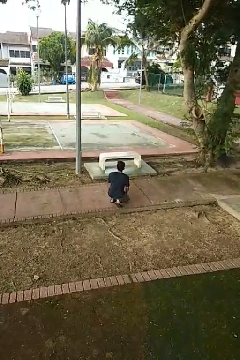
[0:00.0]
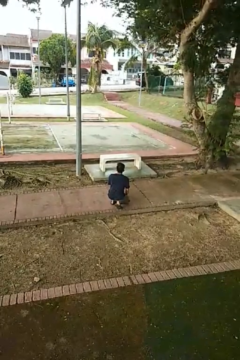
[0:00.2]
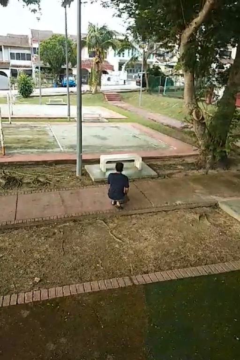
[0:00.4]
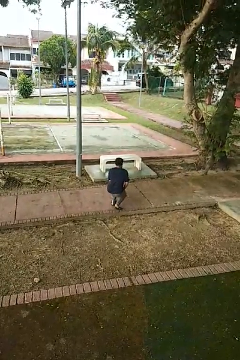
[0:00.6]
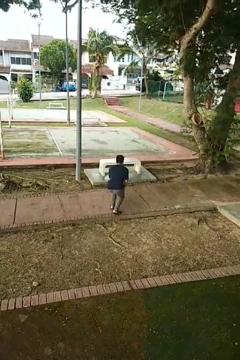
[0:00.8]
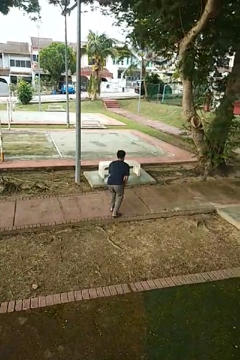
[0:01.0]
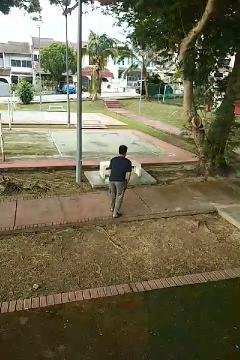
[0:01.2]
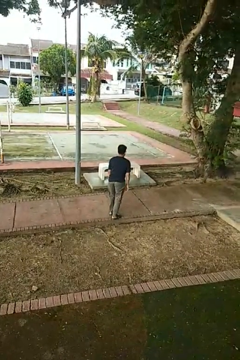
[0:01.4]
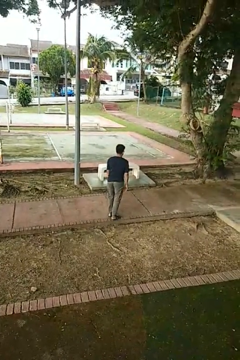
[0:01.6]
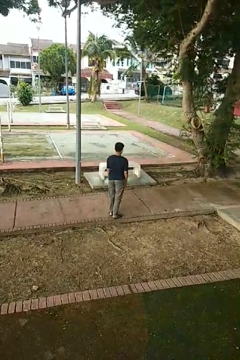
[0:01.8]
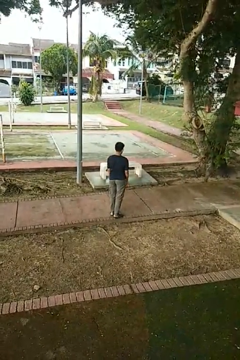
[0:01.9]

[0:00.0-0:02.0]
person stands up from floor

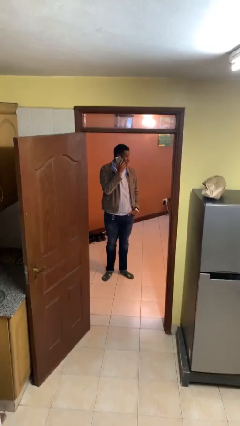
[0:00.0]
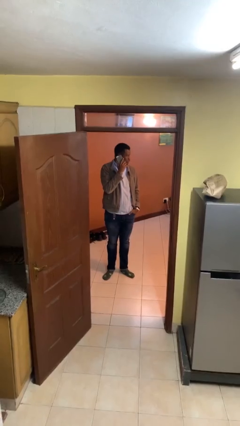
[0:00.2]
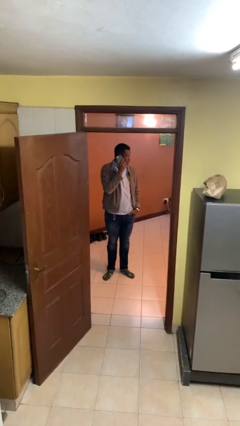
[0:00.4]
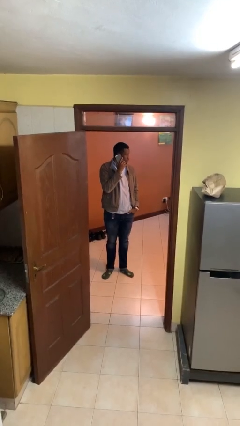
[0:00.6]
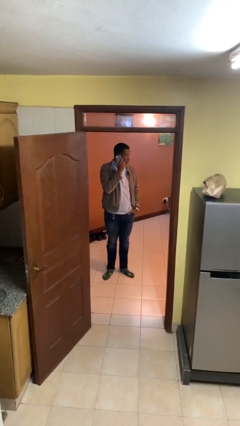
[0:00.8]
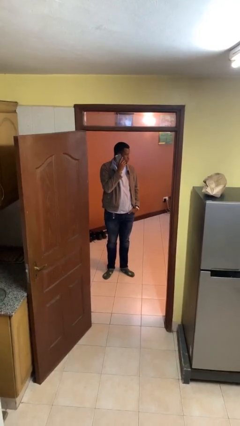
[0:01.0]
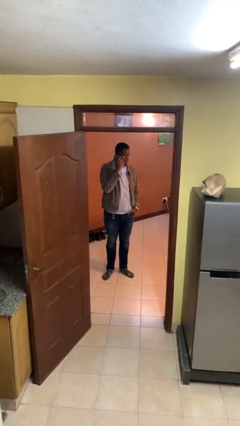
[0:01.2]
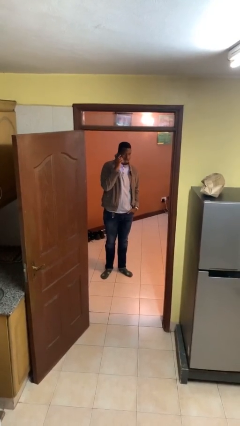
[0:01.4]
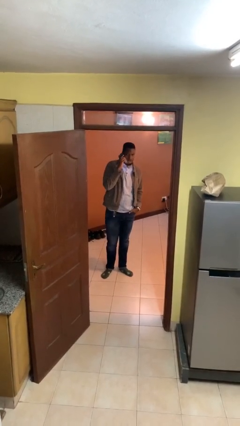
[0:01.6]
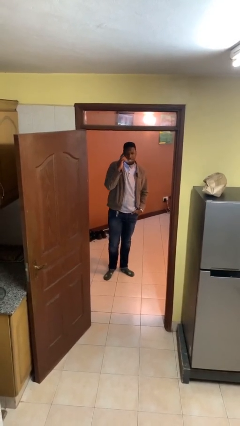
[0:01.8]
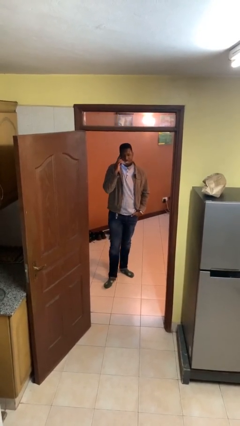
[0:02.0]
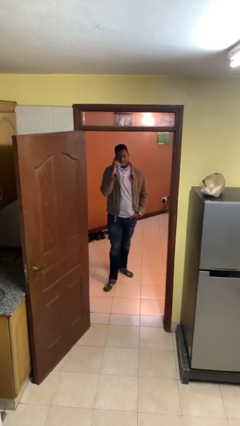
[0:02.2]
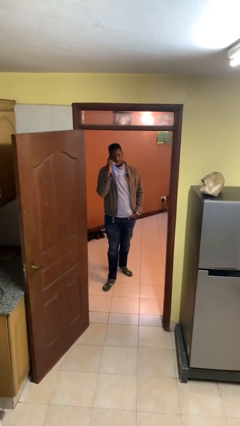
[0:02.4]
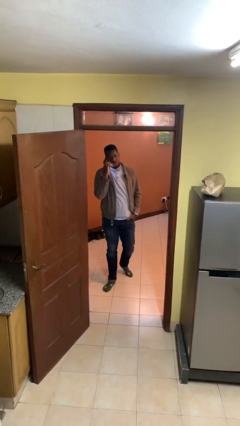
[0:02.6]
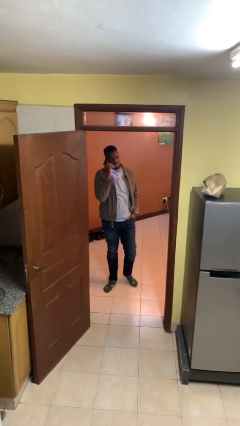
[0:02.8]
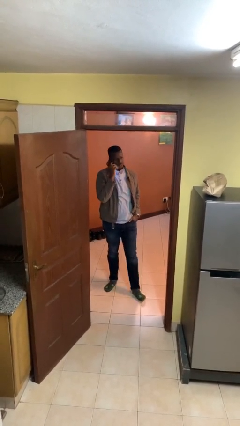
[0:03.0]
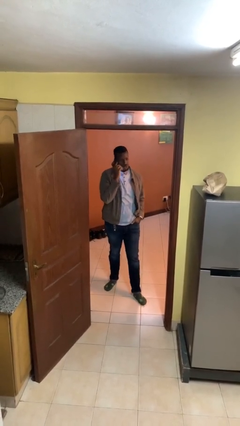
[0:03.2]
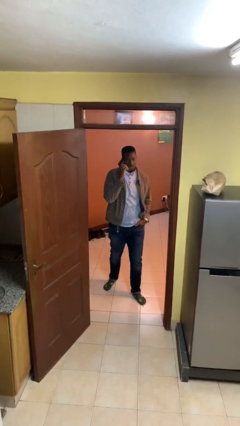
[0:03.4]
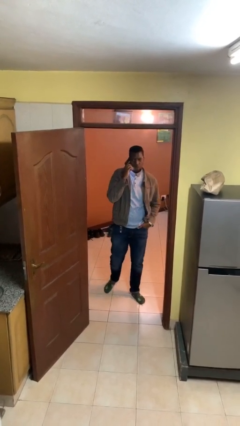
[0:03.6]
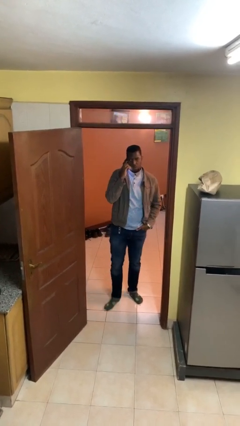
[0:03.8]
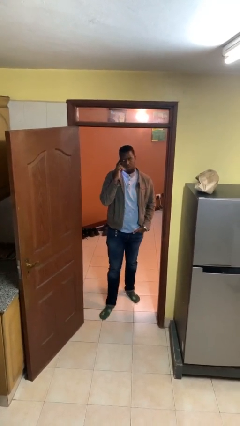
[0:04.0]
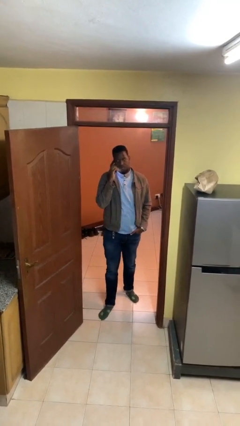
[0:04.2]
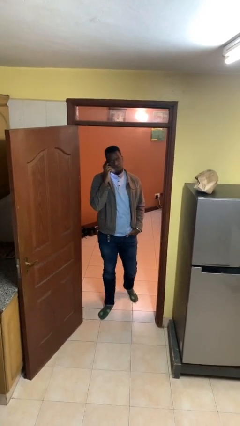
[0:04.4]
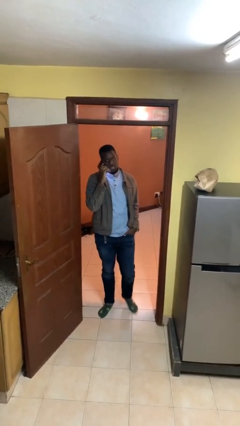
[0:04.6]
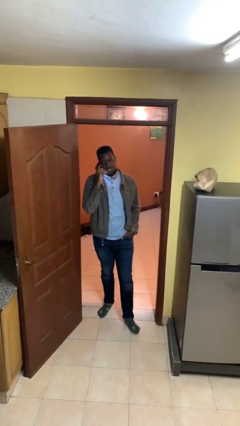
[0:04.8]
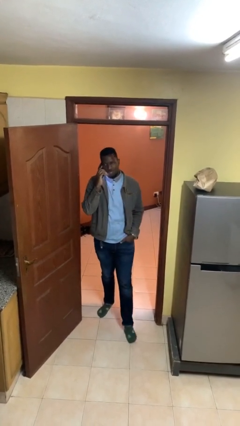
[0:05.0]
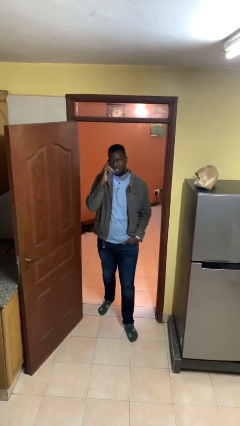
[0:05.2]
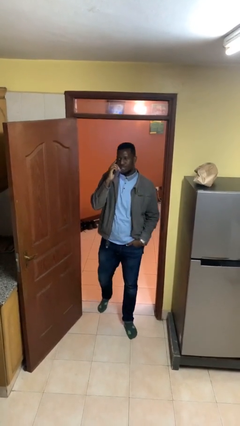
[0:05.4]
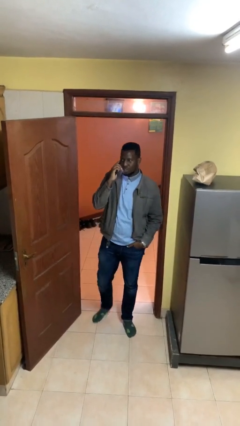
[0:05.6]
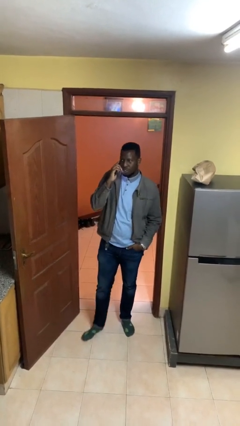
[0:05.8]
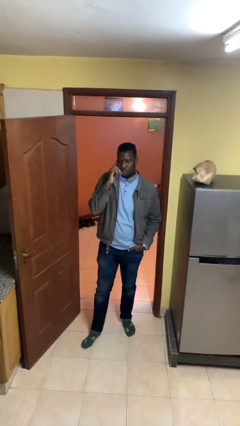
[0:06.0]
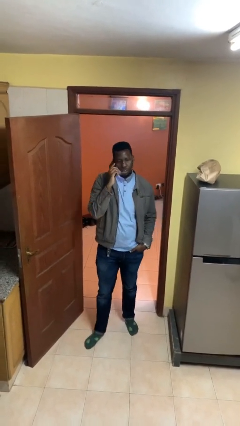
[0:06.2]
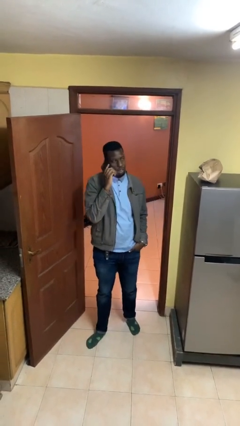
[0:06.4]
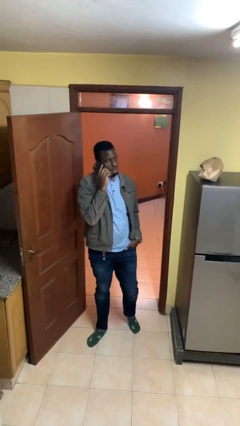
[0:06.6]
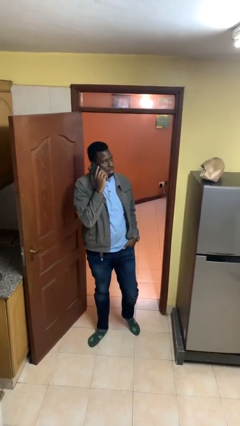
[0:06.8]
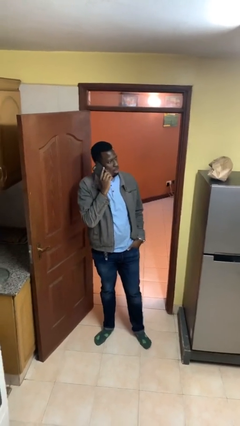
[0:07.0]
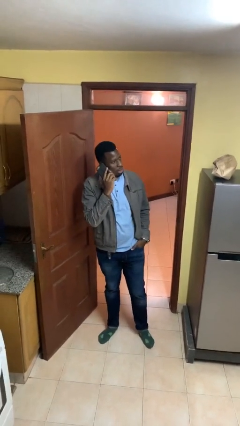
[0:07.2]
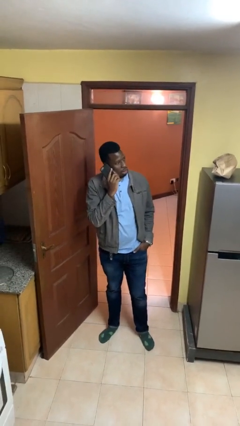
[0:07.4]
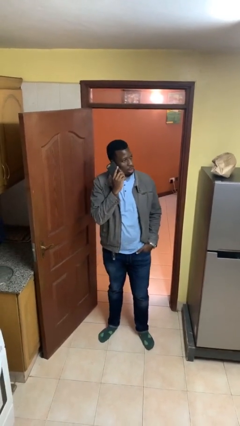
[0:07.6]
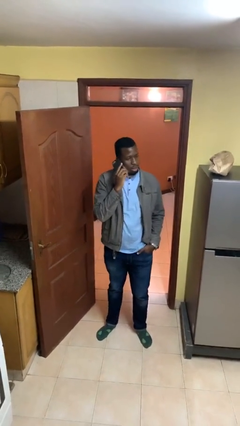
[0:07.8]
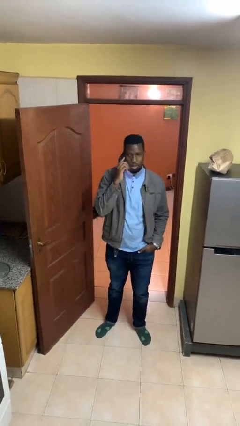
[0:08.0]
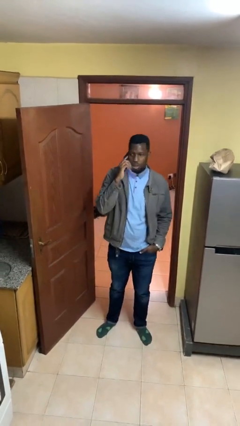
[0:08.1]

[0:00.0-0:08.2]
person enters scene through structure

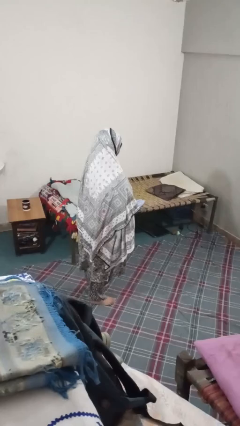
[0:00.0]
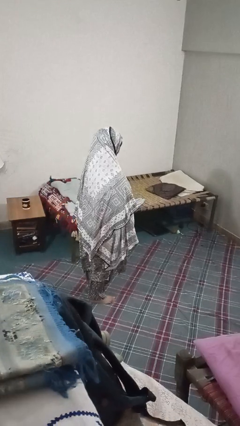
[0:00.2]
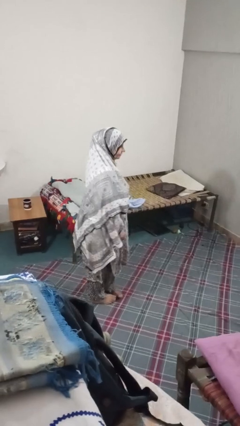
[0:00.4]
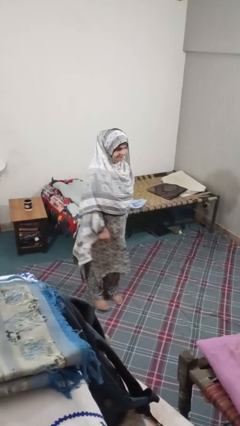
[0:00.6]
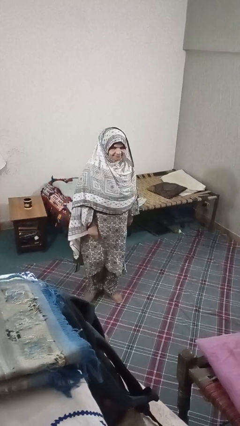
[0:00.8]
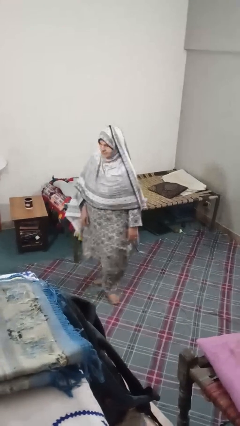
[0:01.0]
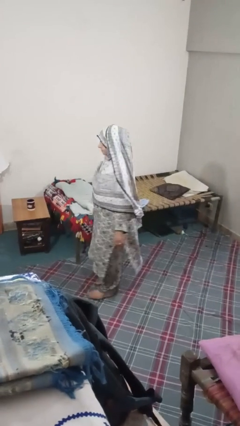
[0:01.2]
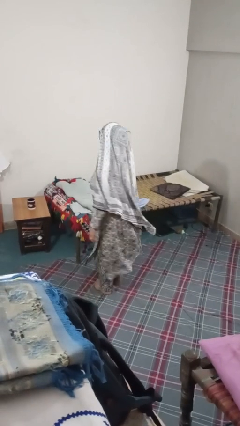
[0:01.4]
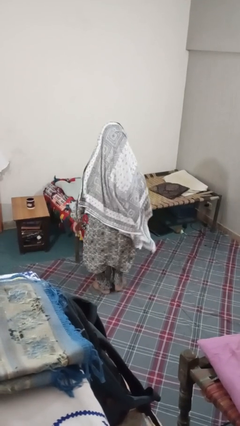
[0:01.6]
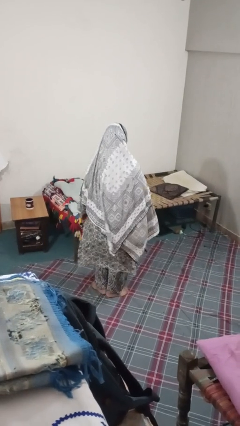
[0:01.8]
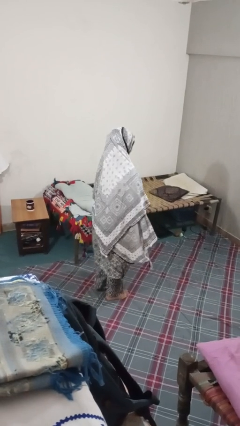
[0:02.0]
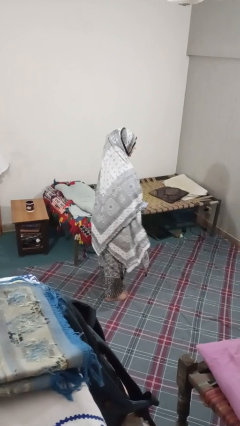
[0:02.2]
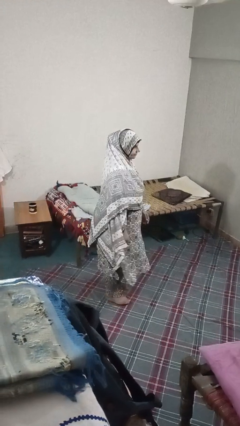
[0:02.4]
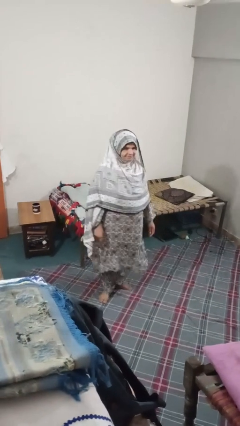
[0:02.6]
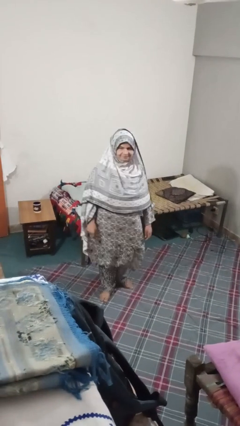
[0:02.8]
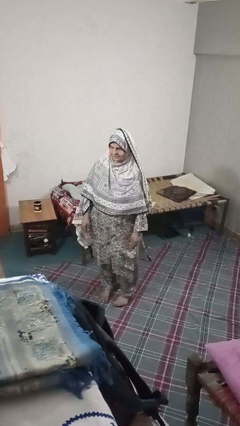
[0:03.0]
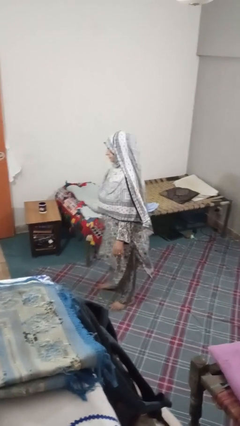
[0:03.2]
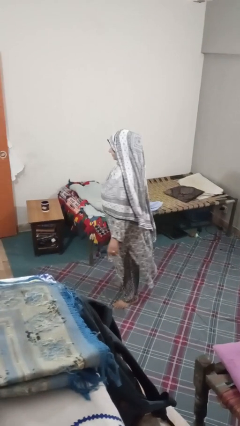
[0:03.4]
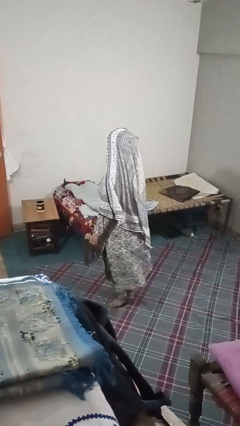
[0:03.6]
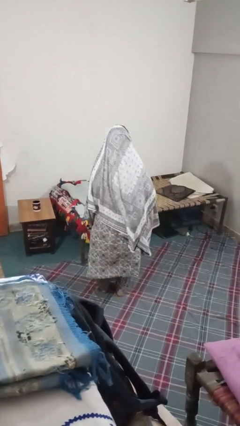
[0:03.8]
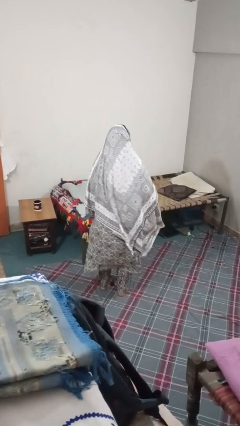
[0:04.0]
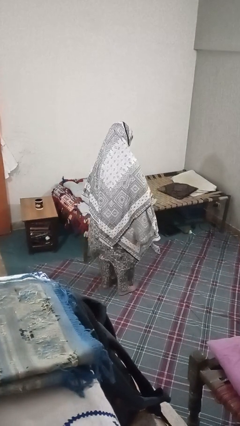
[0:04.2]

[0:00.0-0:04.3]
person twirls

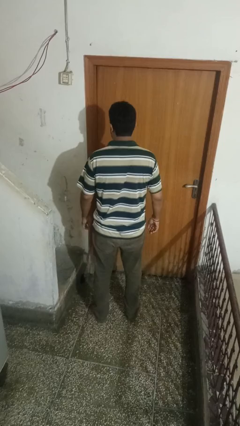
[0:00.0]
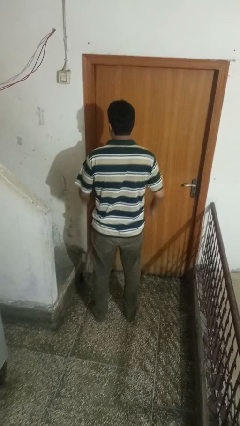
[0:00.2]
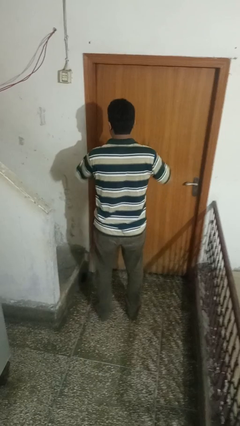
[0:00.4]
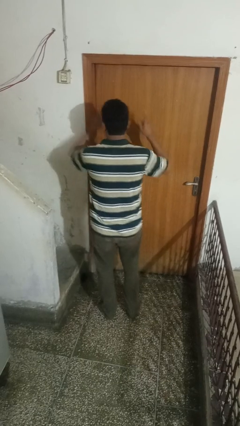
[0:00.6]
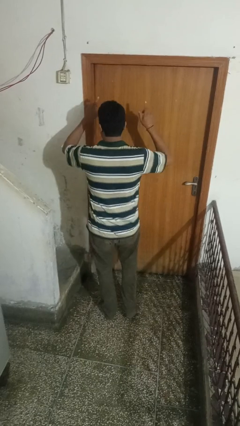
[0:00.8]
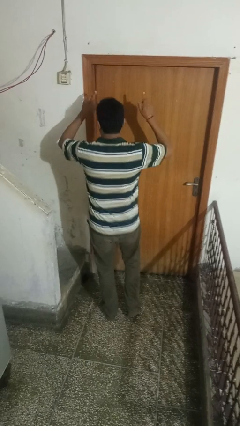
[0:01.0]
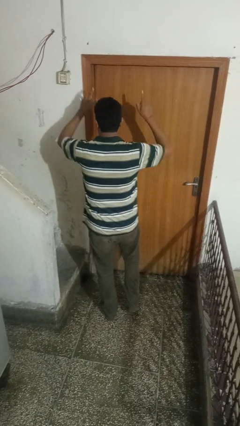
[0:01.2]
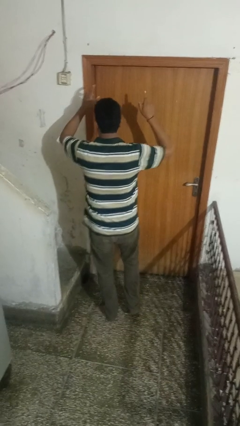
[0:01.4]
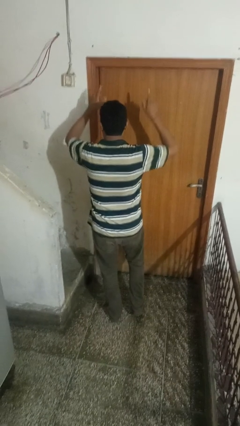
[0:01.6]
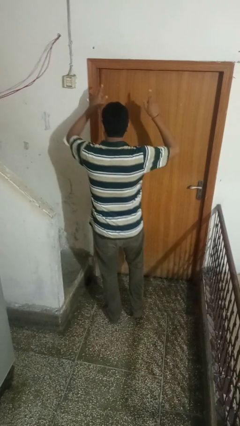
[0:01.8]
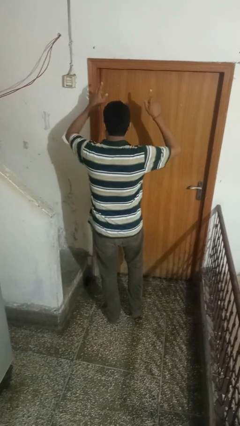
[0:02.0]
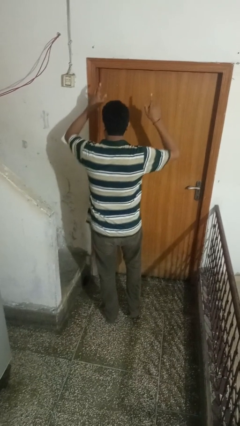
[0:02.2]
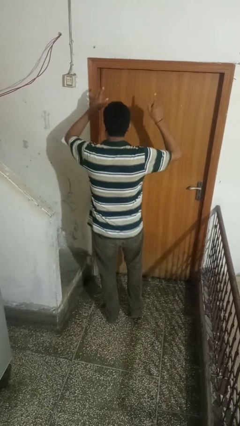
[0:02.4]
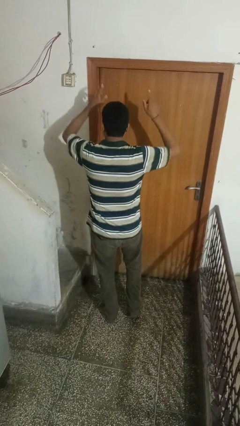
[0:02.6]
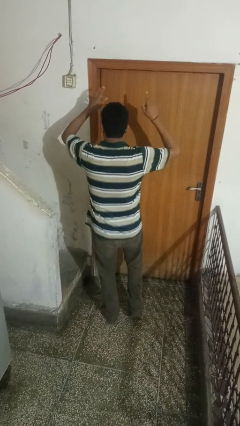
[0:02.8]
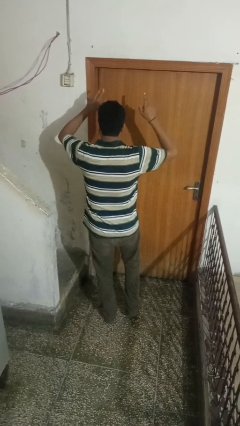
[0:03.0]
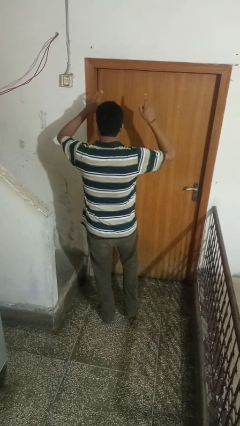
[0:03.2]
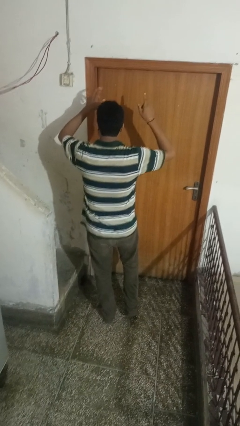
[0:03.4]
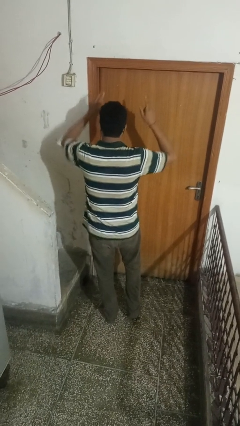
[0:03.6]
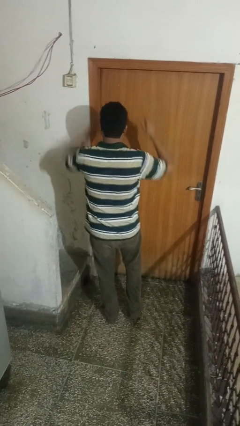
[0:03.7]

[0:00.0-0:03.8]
person dances in place
